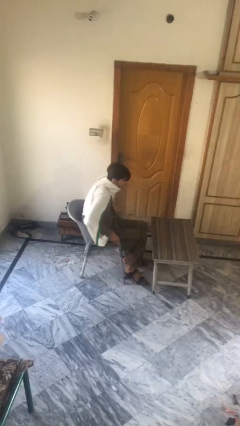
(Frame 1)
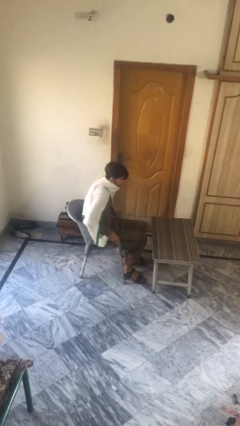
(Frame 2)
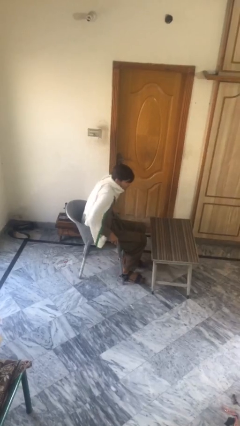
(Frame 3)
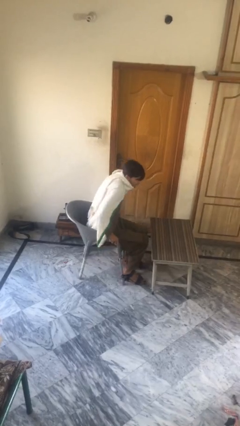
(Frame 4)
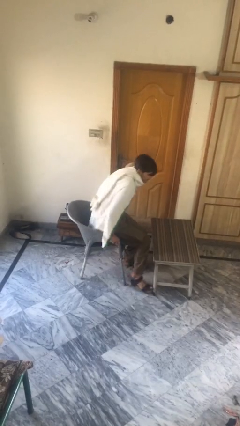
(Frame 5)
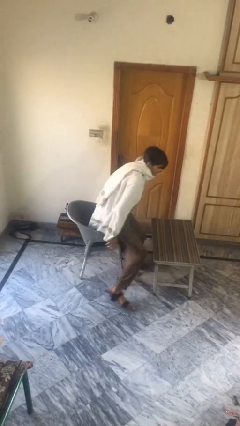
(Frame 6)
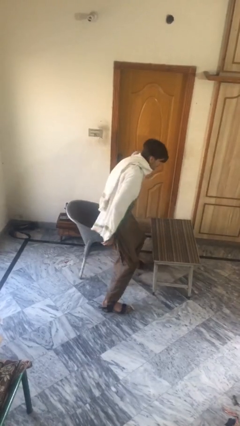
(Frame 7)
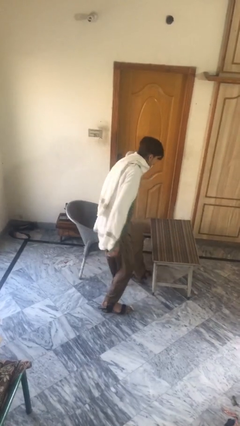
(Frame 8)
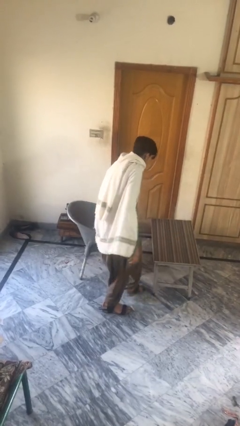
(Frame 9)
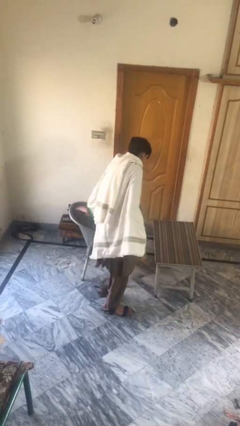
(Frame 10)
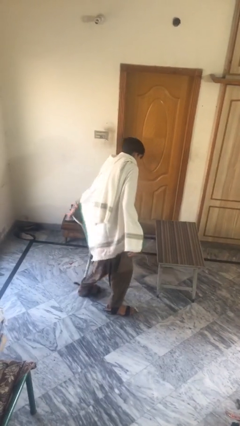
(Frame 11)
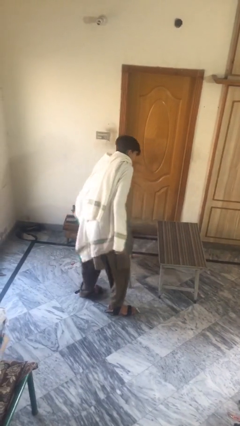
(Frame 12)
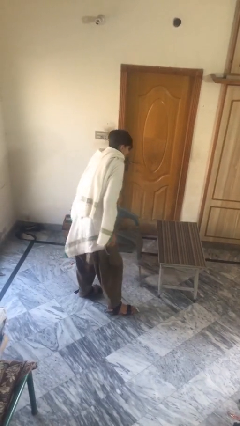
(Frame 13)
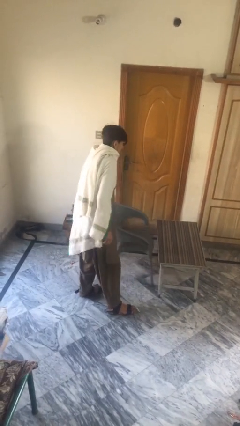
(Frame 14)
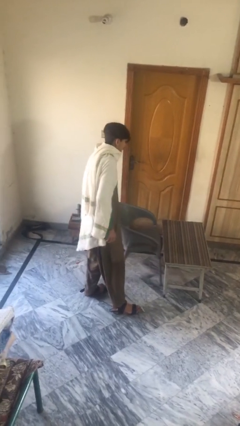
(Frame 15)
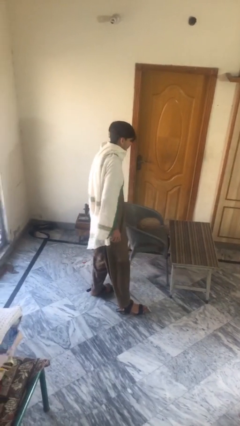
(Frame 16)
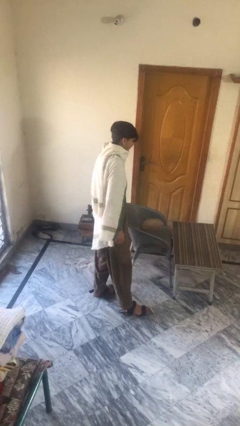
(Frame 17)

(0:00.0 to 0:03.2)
person stands up

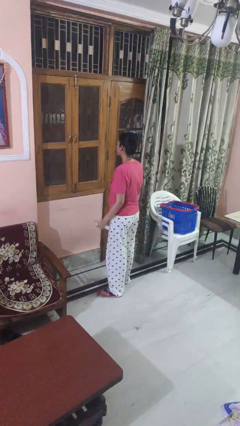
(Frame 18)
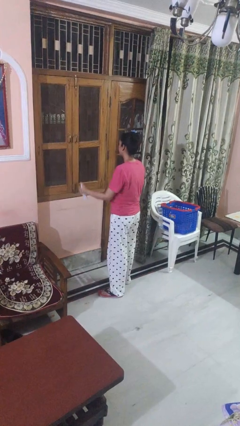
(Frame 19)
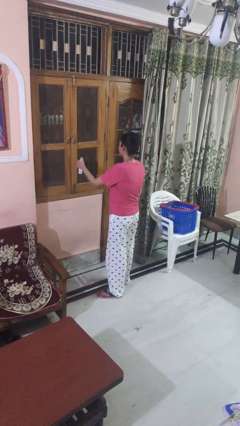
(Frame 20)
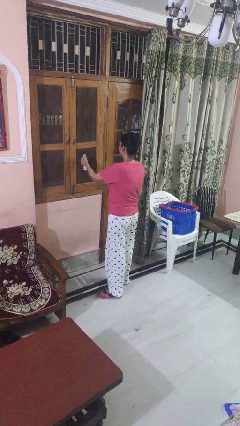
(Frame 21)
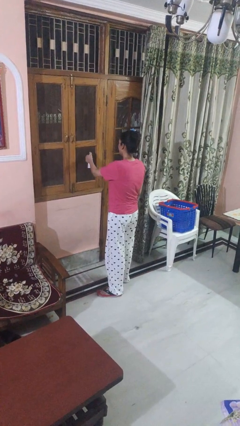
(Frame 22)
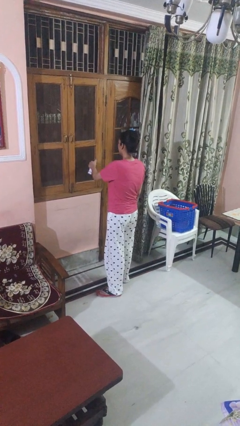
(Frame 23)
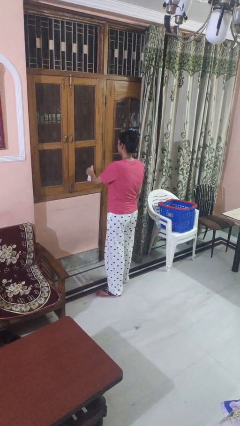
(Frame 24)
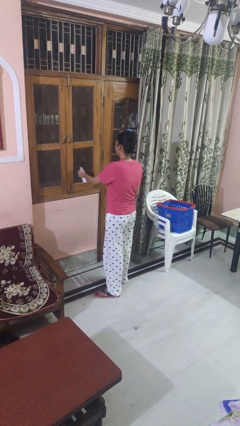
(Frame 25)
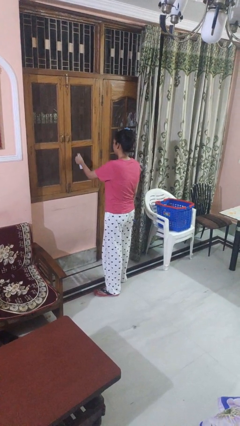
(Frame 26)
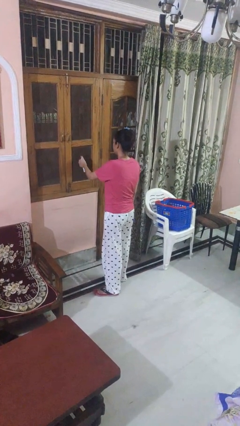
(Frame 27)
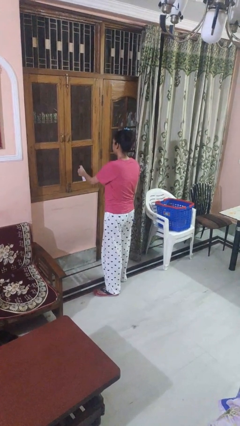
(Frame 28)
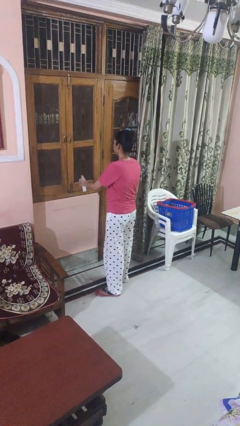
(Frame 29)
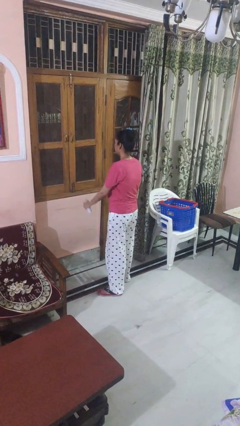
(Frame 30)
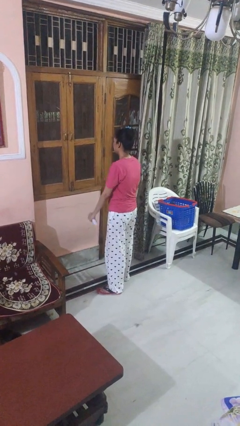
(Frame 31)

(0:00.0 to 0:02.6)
person sprays from bottle

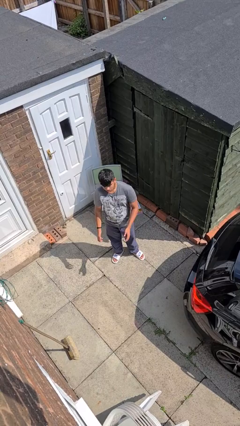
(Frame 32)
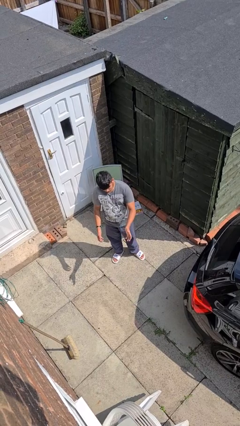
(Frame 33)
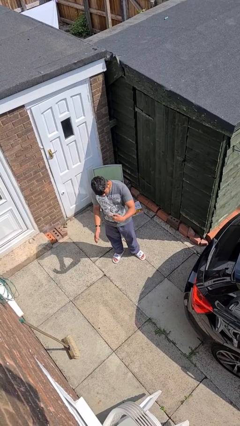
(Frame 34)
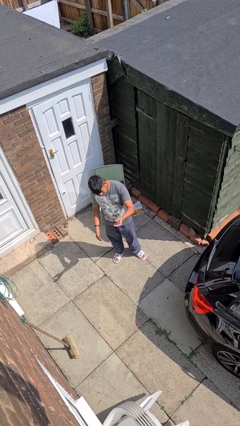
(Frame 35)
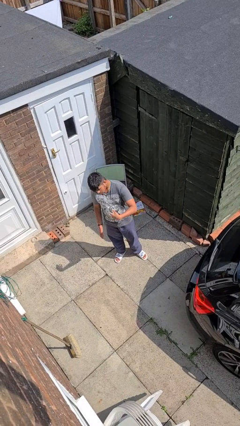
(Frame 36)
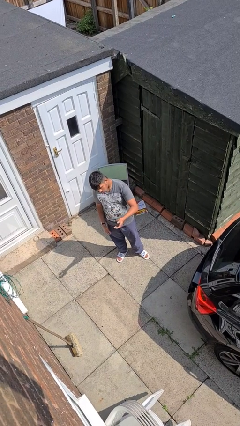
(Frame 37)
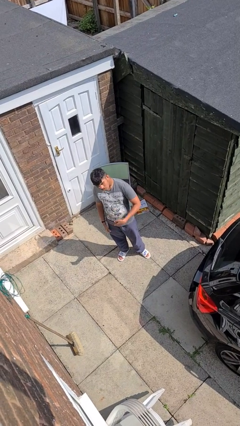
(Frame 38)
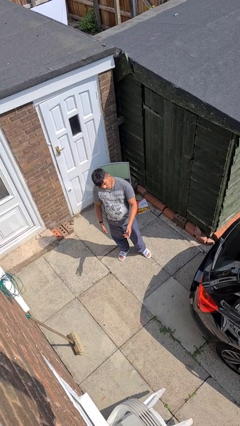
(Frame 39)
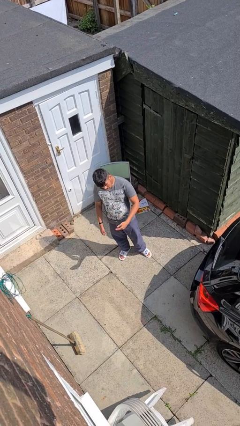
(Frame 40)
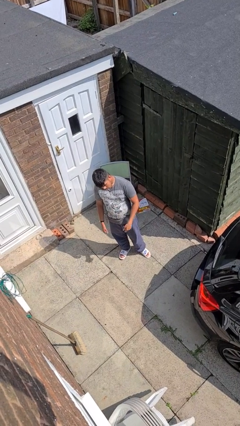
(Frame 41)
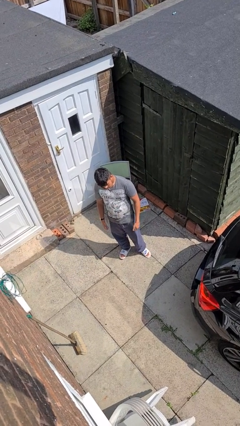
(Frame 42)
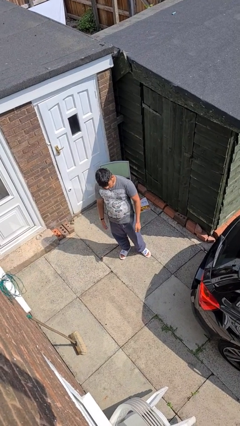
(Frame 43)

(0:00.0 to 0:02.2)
person gestures come here

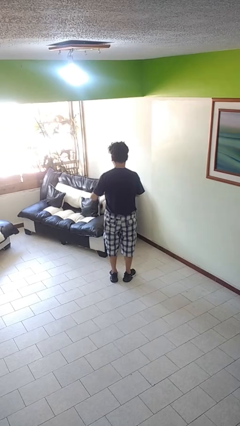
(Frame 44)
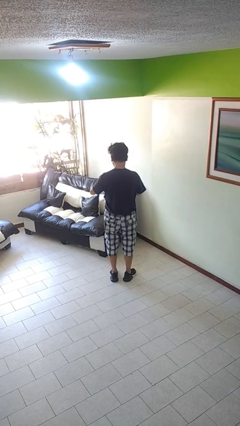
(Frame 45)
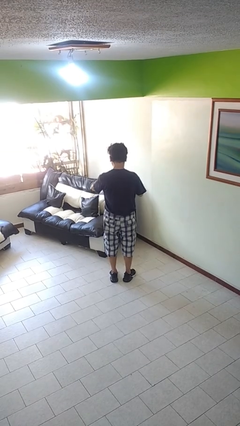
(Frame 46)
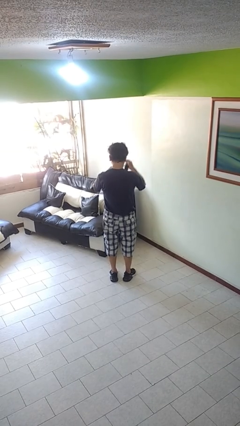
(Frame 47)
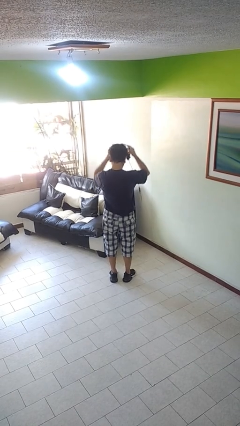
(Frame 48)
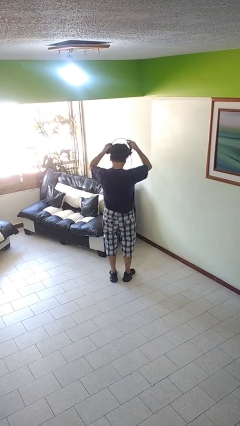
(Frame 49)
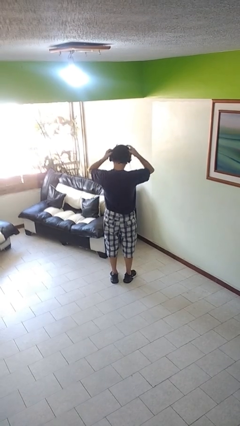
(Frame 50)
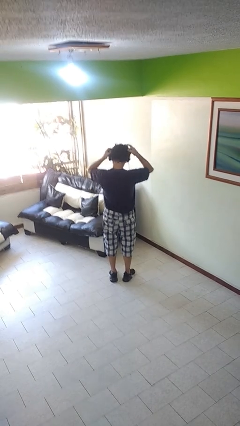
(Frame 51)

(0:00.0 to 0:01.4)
person puts on headphones

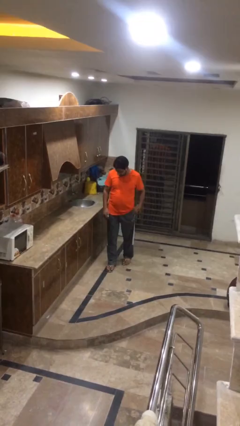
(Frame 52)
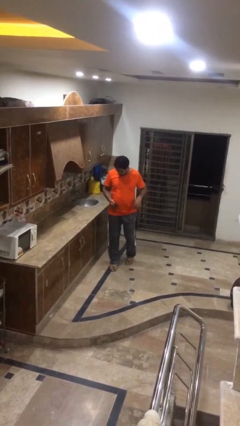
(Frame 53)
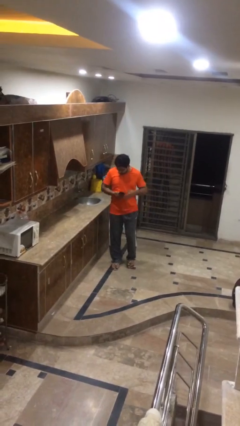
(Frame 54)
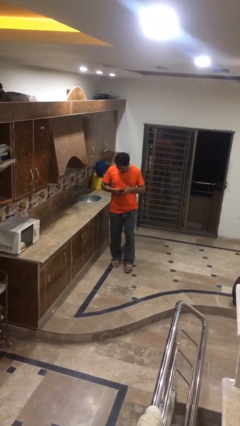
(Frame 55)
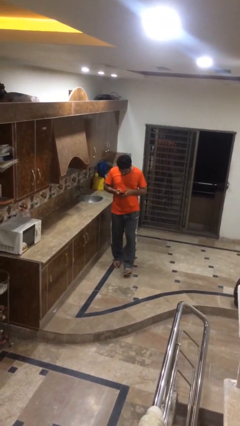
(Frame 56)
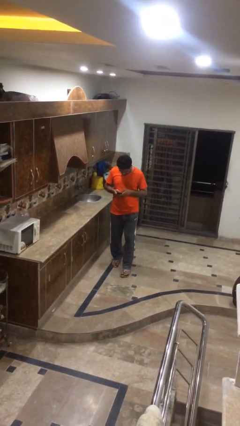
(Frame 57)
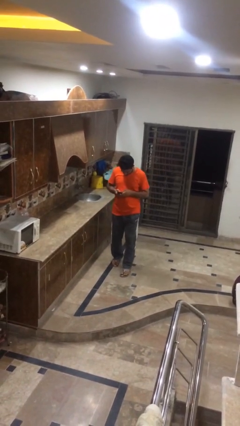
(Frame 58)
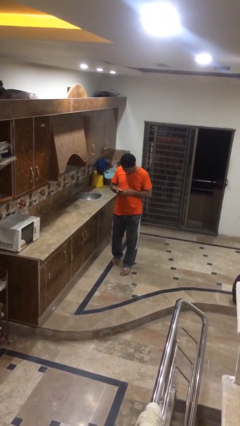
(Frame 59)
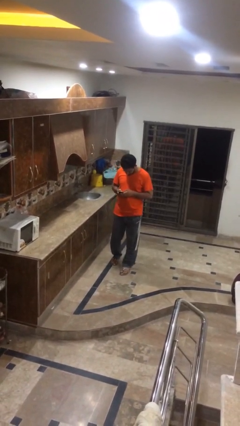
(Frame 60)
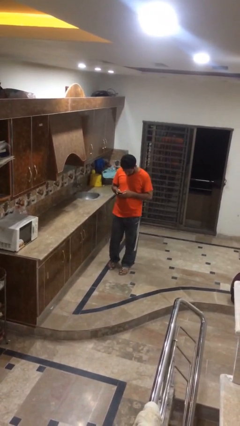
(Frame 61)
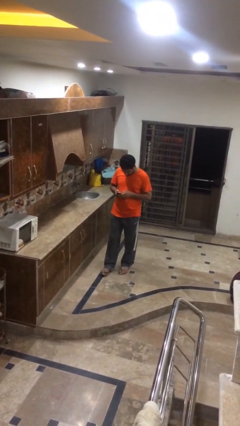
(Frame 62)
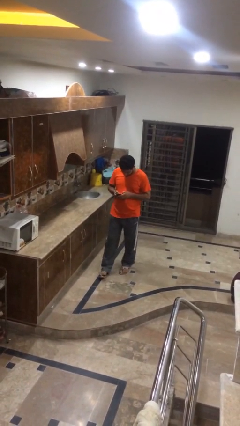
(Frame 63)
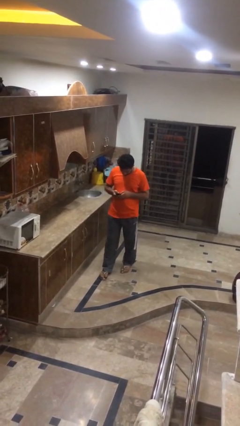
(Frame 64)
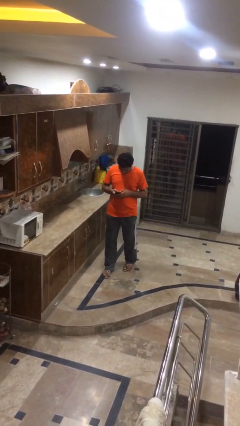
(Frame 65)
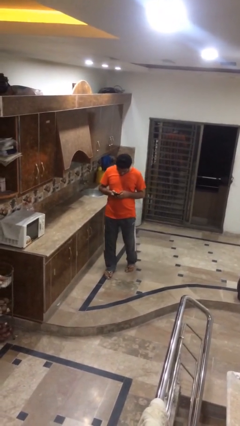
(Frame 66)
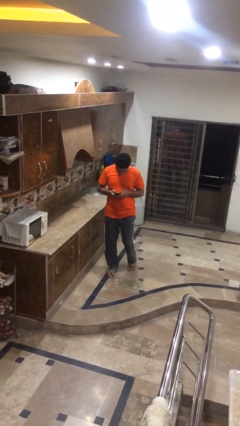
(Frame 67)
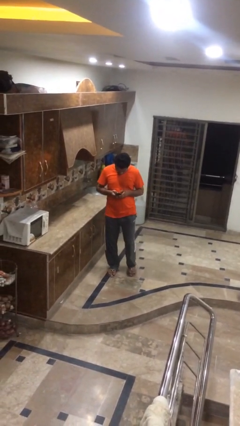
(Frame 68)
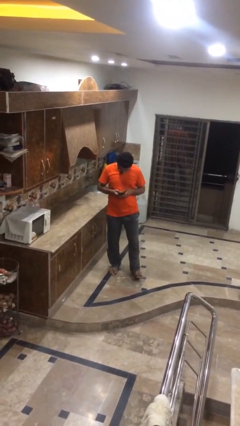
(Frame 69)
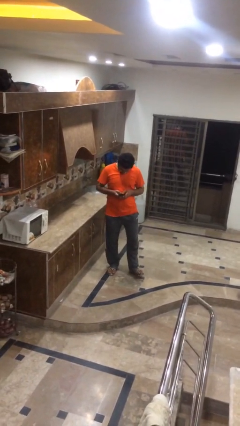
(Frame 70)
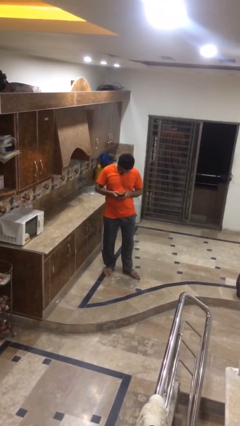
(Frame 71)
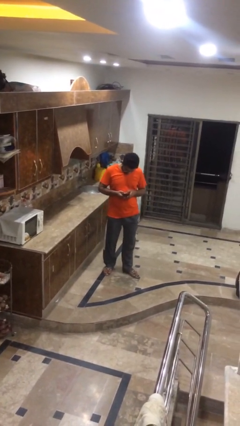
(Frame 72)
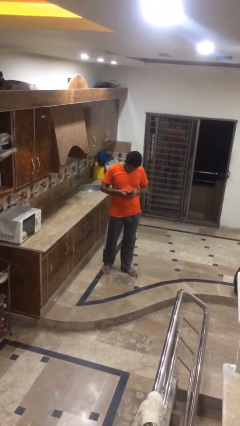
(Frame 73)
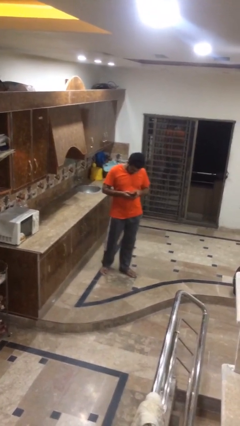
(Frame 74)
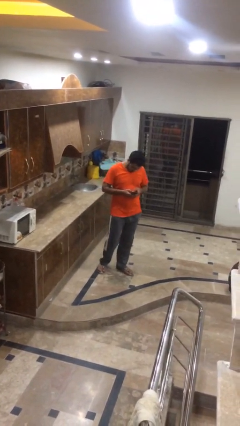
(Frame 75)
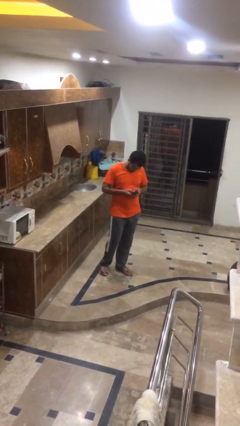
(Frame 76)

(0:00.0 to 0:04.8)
person texts on phone

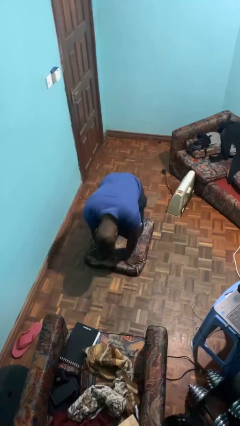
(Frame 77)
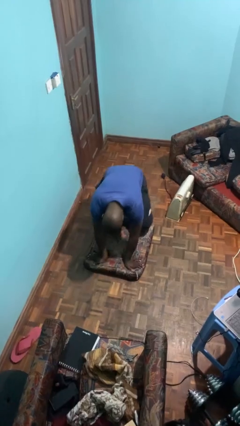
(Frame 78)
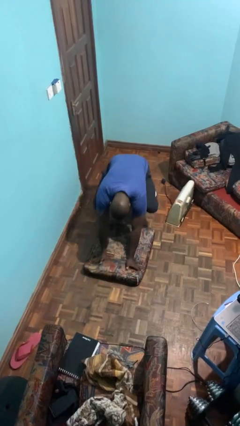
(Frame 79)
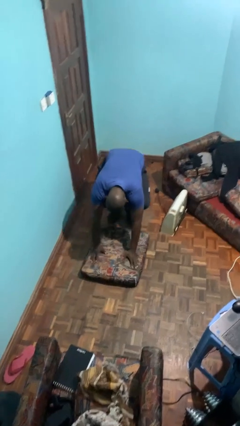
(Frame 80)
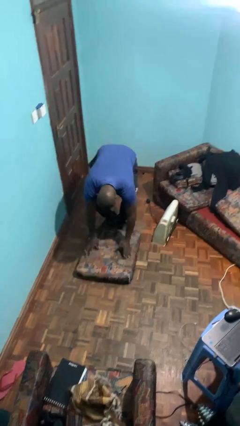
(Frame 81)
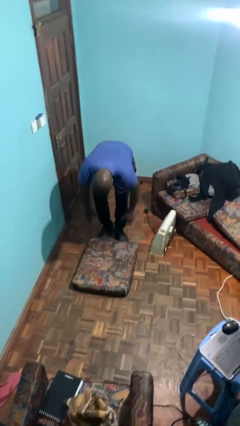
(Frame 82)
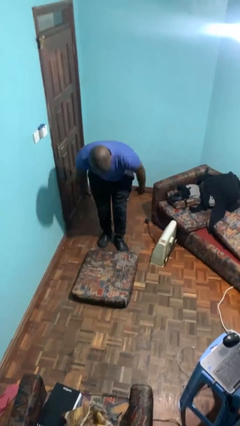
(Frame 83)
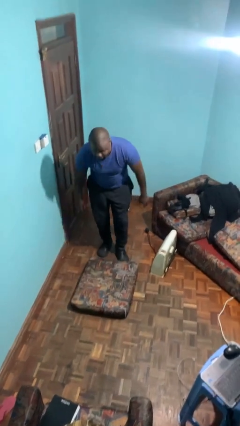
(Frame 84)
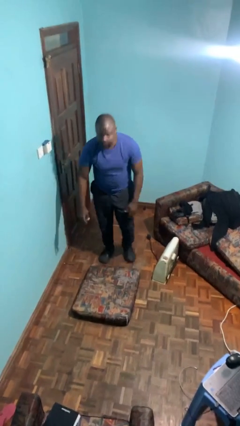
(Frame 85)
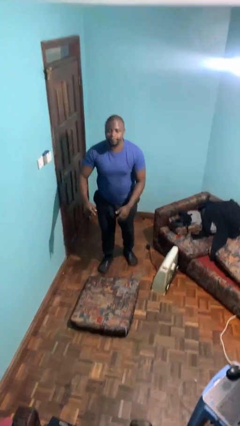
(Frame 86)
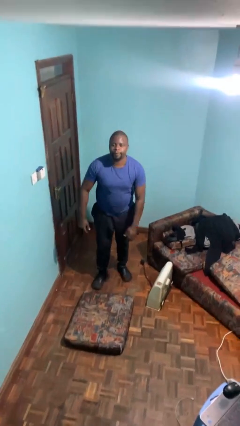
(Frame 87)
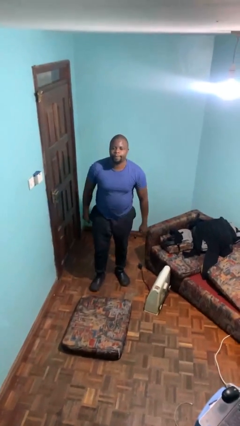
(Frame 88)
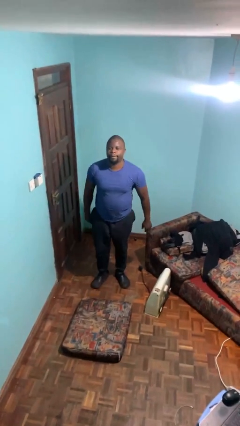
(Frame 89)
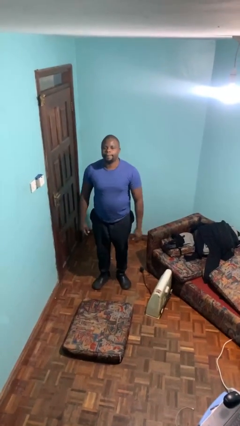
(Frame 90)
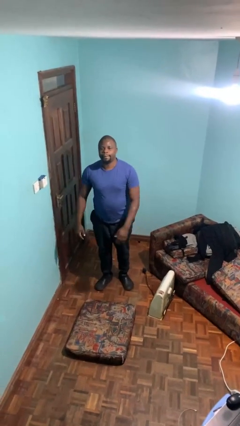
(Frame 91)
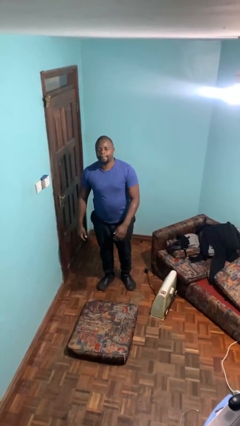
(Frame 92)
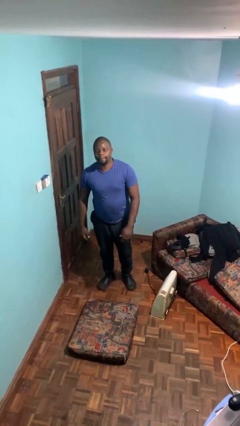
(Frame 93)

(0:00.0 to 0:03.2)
person stands up from floor
